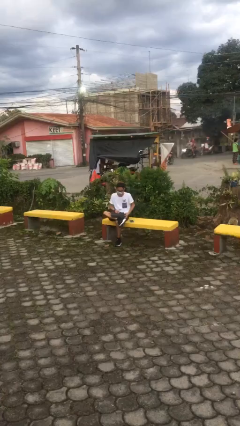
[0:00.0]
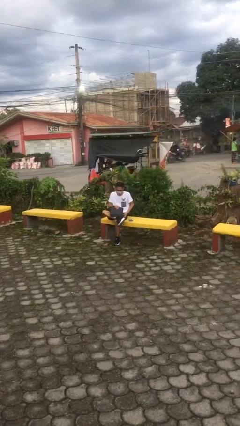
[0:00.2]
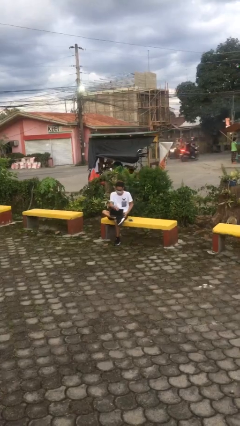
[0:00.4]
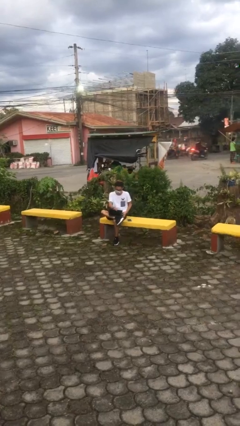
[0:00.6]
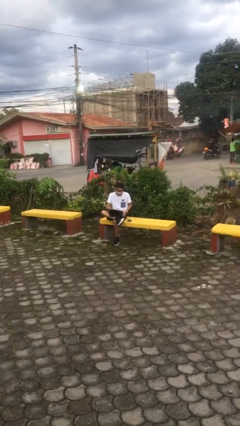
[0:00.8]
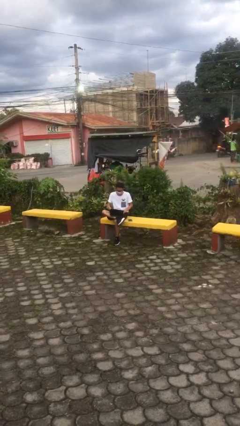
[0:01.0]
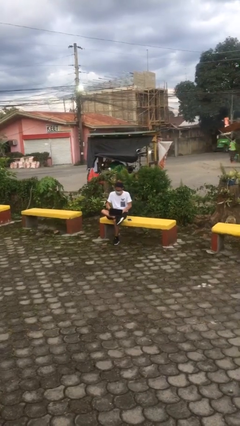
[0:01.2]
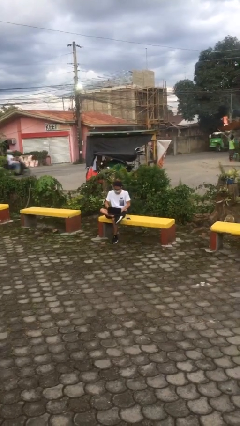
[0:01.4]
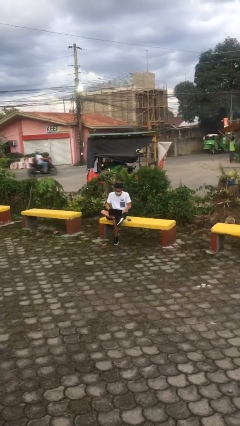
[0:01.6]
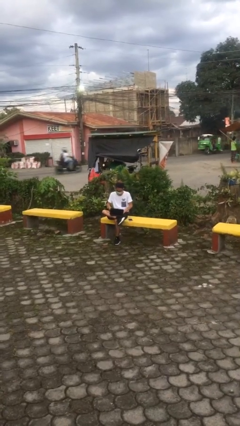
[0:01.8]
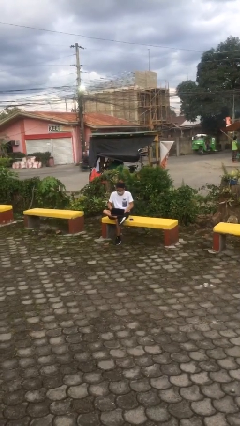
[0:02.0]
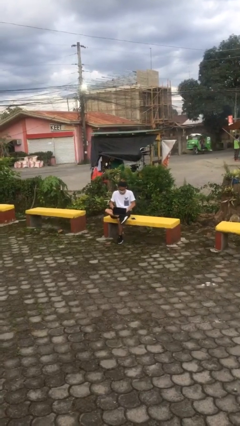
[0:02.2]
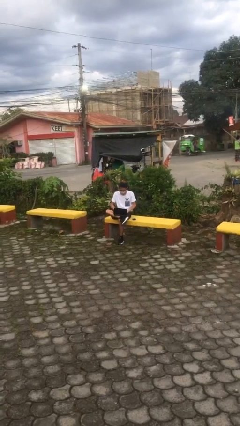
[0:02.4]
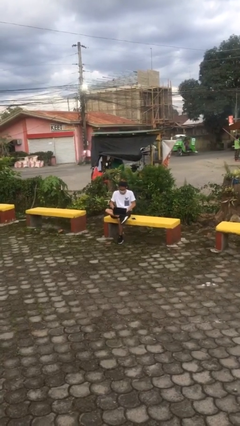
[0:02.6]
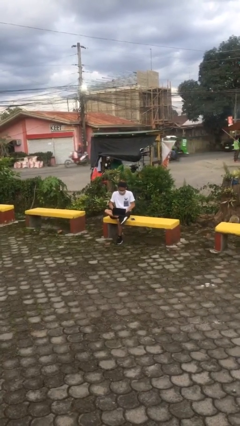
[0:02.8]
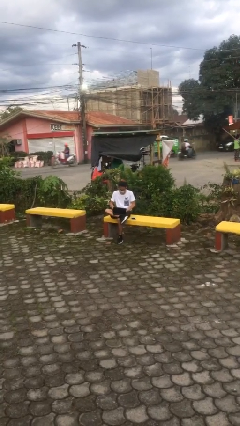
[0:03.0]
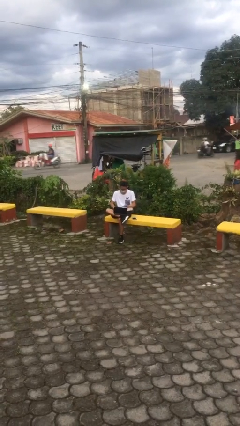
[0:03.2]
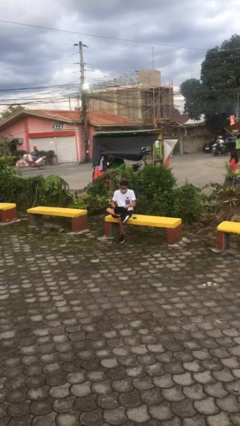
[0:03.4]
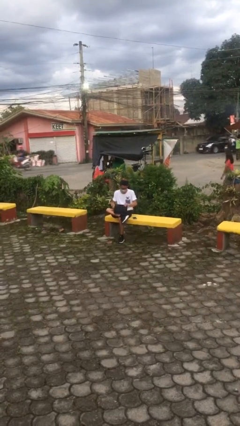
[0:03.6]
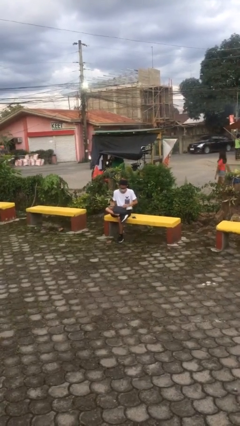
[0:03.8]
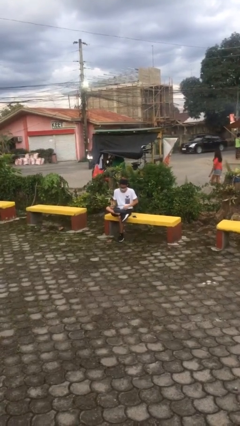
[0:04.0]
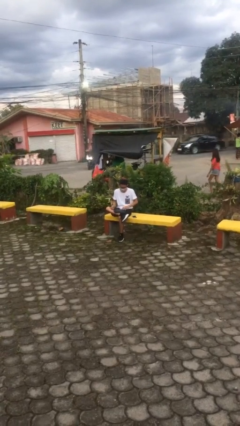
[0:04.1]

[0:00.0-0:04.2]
person interacts with laptop

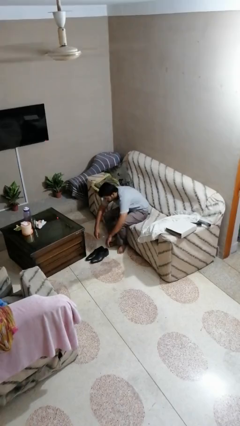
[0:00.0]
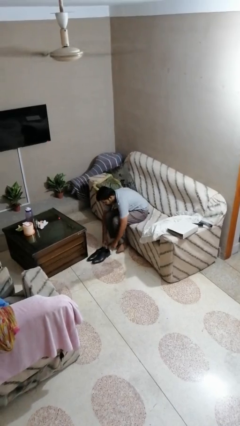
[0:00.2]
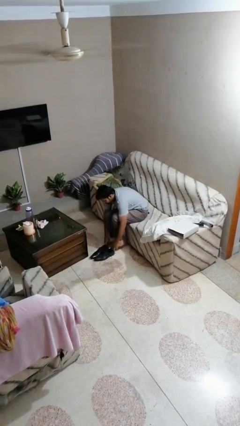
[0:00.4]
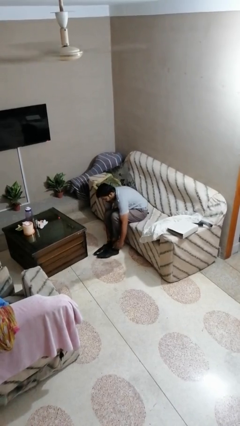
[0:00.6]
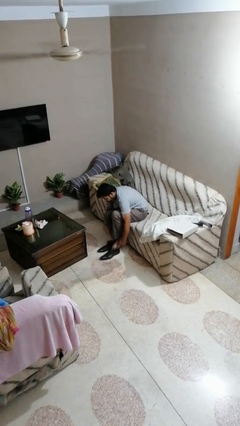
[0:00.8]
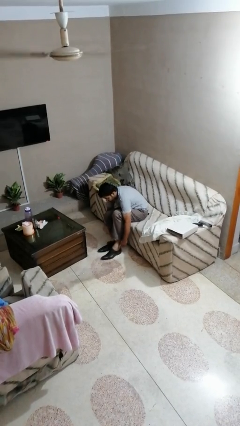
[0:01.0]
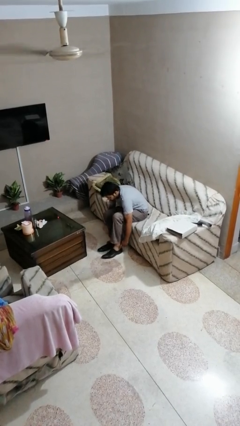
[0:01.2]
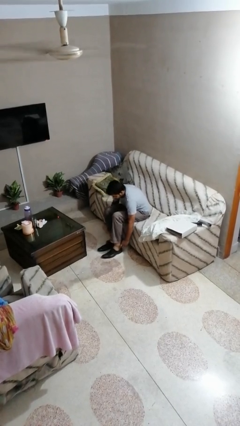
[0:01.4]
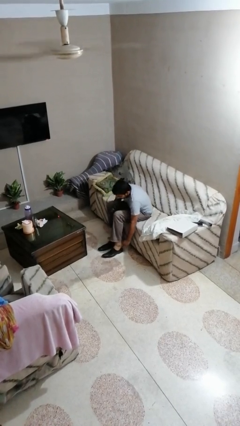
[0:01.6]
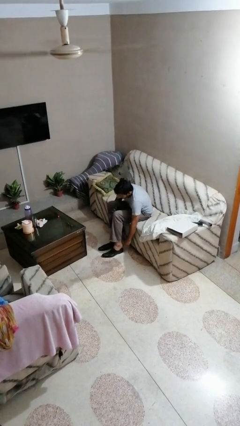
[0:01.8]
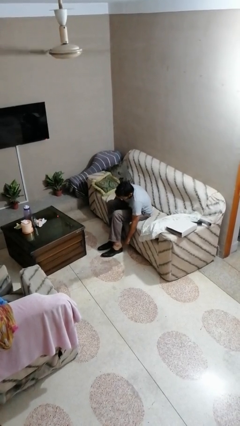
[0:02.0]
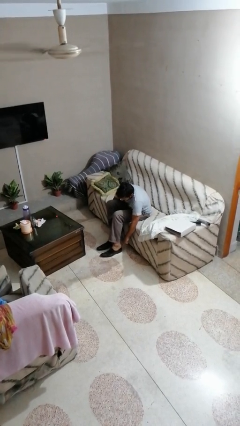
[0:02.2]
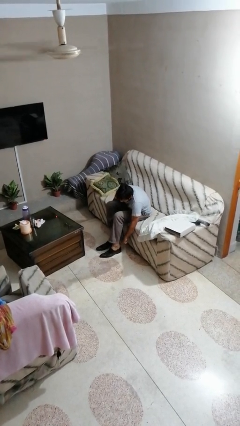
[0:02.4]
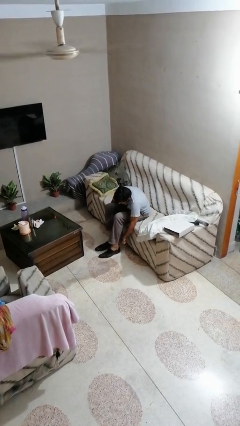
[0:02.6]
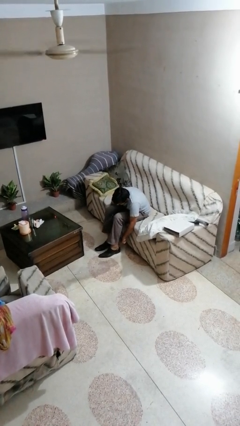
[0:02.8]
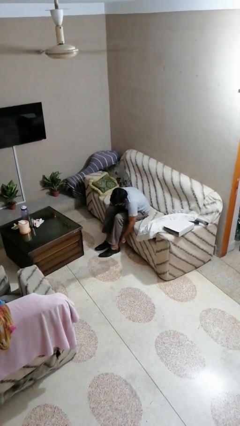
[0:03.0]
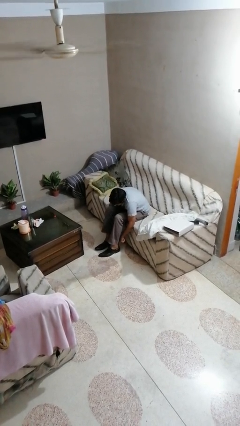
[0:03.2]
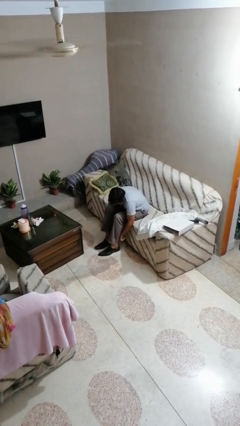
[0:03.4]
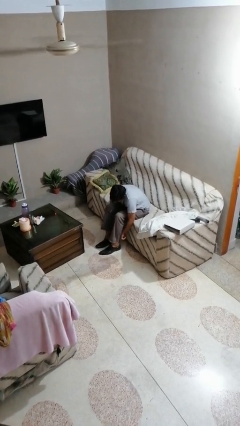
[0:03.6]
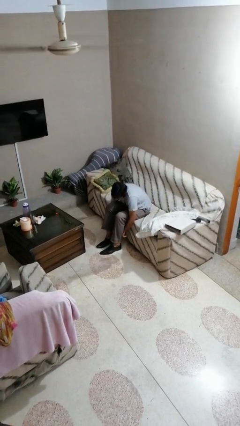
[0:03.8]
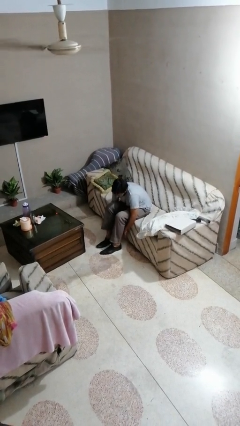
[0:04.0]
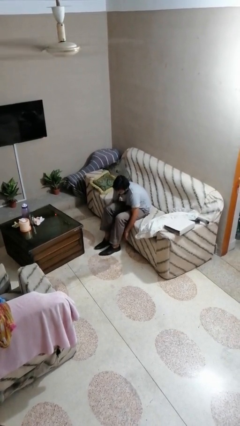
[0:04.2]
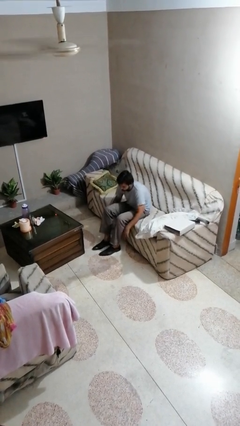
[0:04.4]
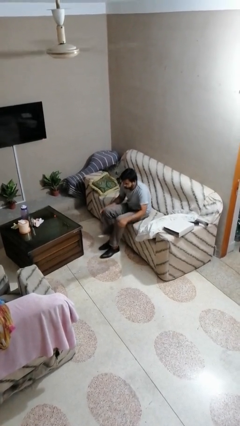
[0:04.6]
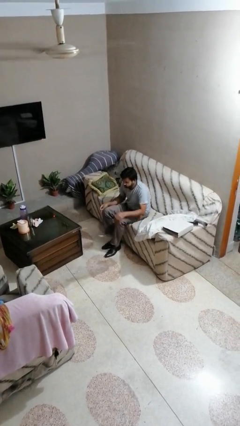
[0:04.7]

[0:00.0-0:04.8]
person puts on shoes

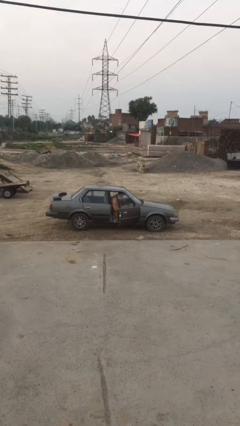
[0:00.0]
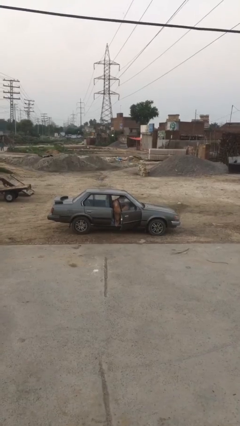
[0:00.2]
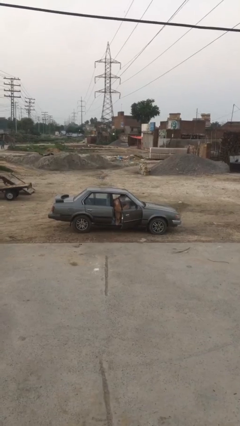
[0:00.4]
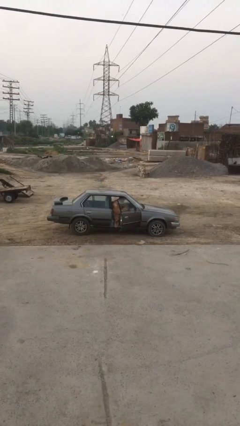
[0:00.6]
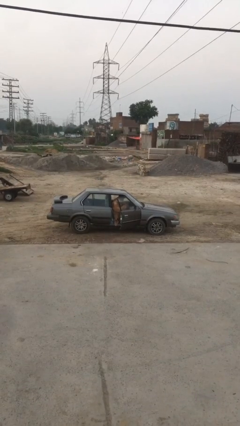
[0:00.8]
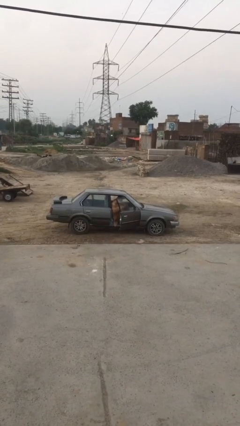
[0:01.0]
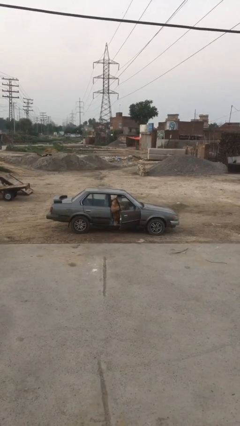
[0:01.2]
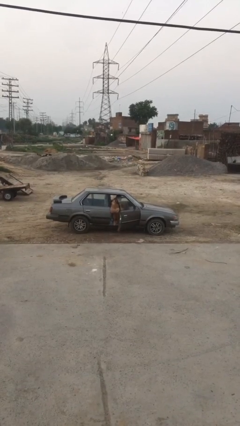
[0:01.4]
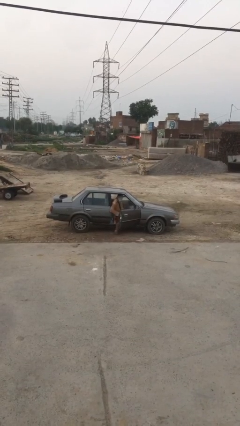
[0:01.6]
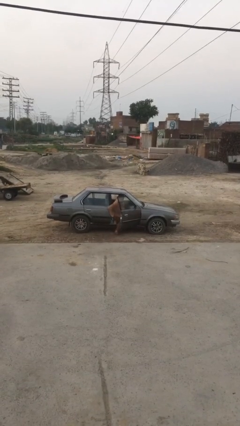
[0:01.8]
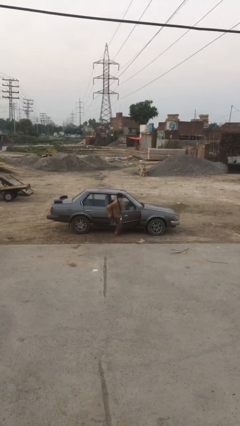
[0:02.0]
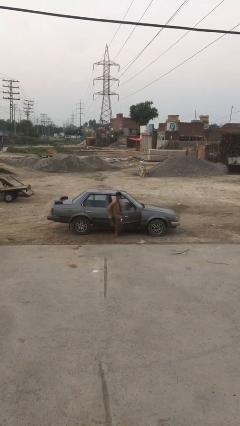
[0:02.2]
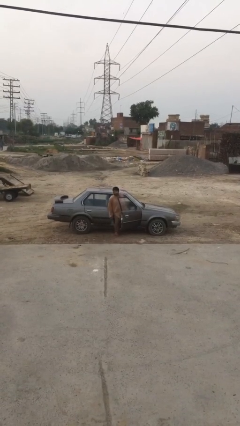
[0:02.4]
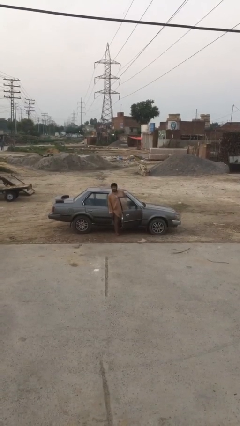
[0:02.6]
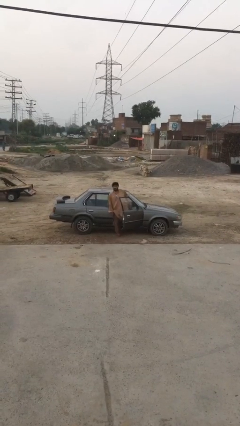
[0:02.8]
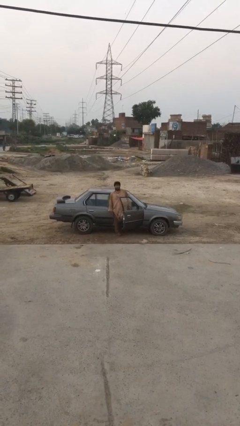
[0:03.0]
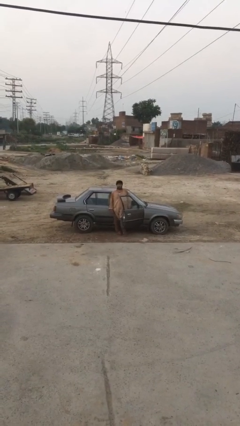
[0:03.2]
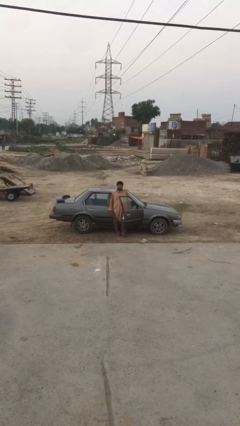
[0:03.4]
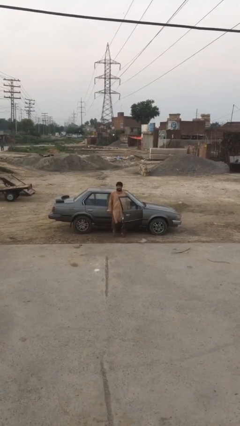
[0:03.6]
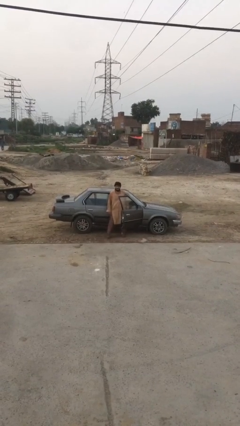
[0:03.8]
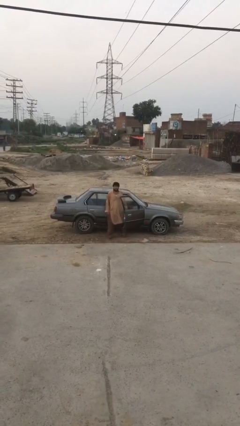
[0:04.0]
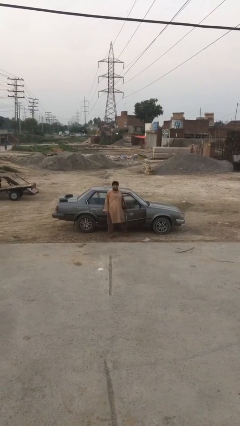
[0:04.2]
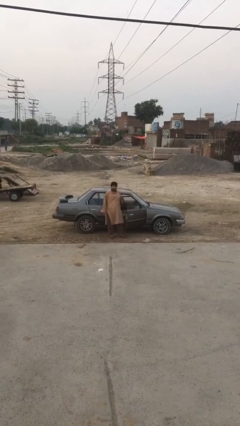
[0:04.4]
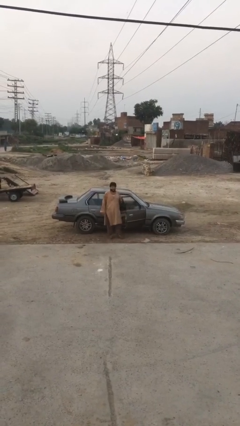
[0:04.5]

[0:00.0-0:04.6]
person exits car

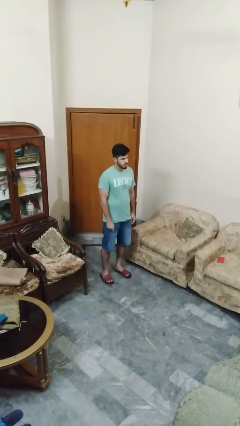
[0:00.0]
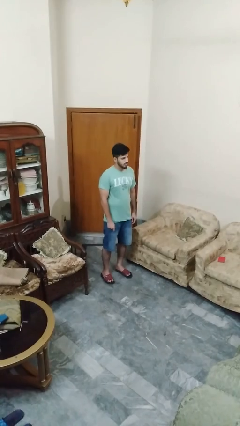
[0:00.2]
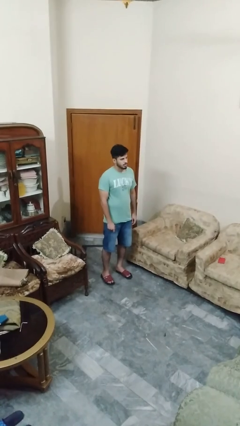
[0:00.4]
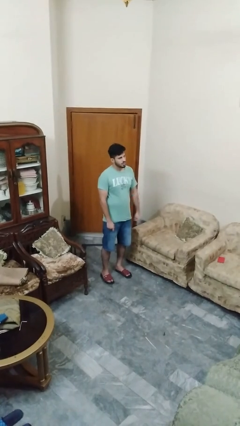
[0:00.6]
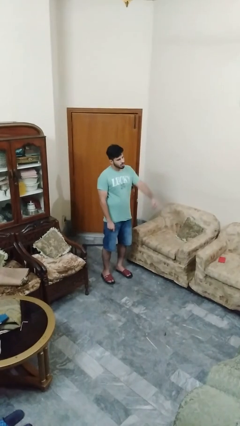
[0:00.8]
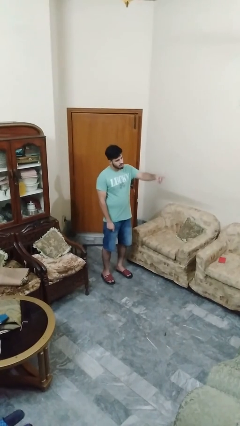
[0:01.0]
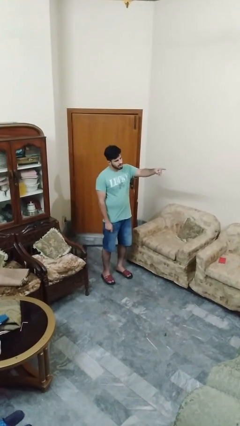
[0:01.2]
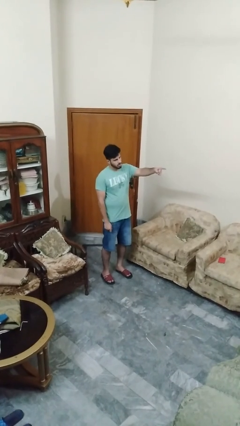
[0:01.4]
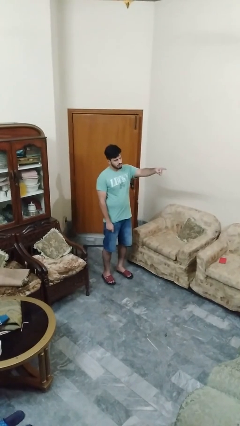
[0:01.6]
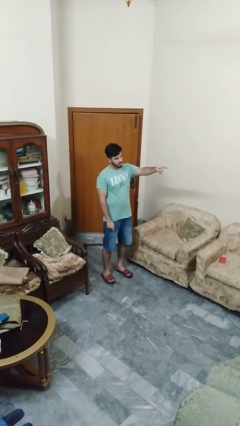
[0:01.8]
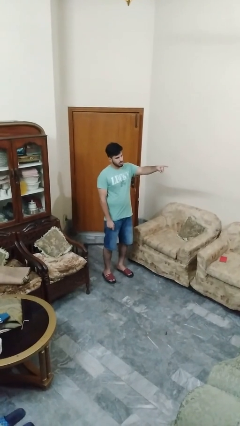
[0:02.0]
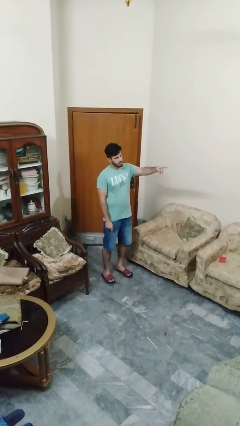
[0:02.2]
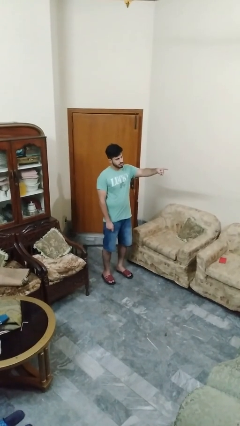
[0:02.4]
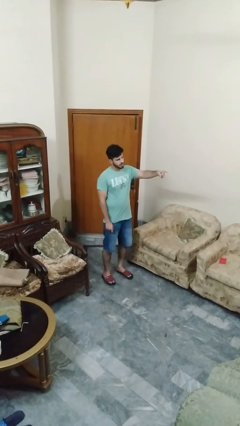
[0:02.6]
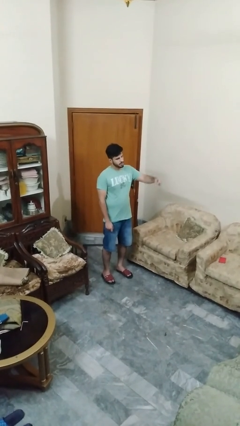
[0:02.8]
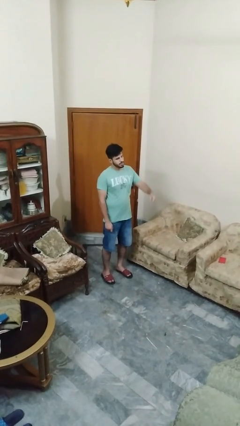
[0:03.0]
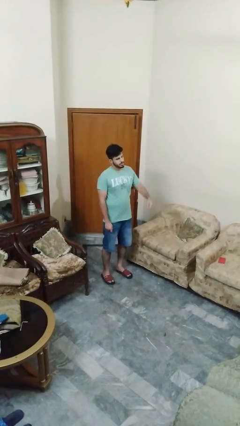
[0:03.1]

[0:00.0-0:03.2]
person points at person

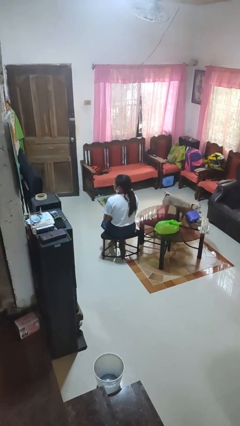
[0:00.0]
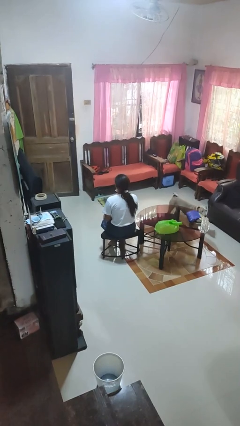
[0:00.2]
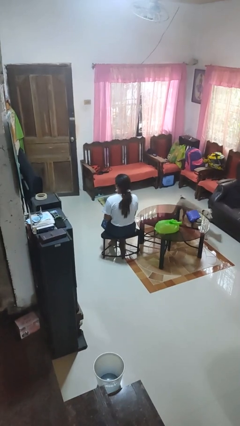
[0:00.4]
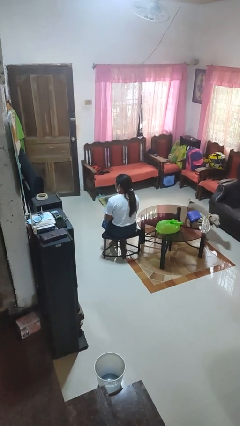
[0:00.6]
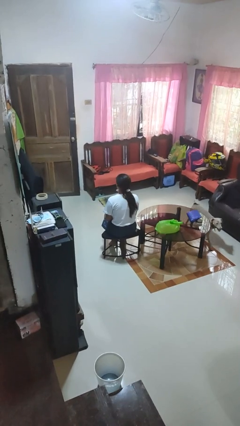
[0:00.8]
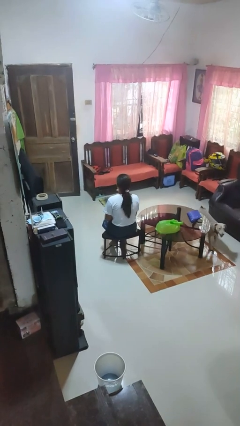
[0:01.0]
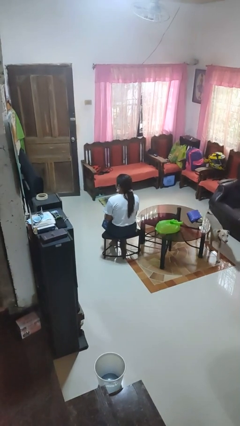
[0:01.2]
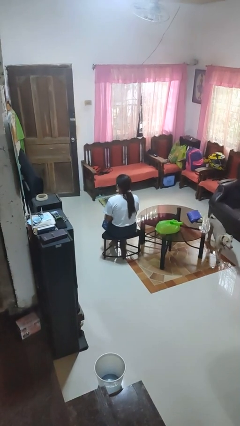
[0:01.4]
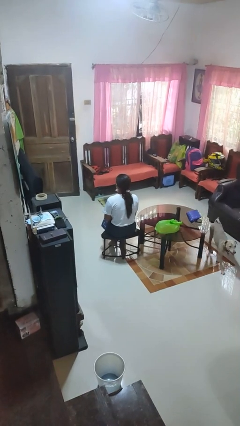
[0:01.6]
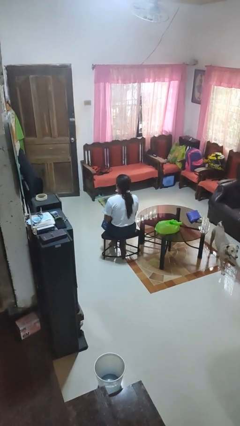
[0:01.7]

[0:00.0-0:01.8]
person shakes head
